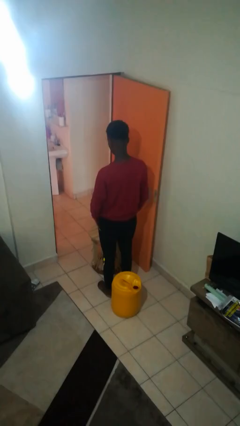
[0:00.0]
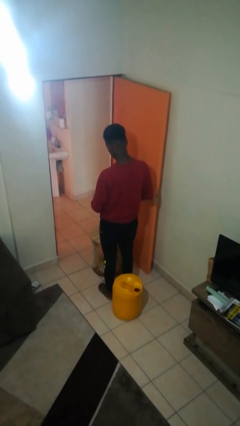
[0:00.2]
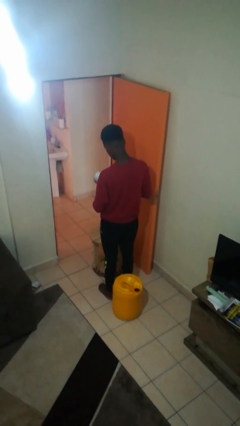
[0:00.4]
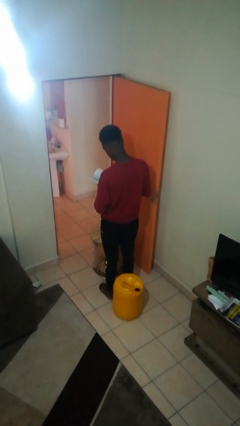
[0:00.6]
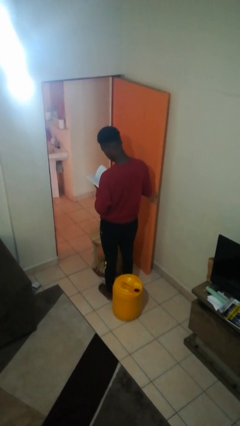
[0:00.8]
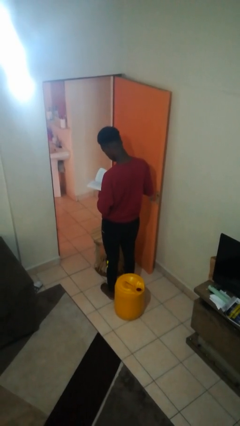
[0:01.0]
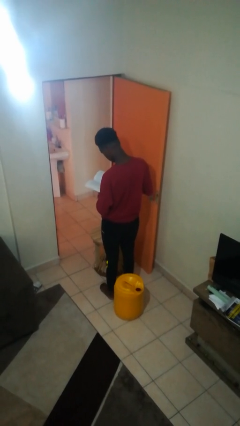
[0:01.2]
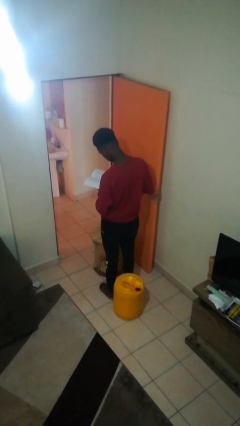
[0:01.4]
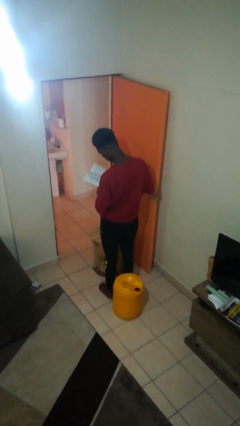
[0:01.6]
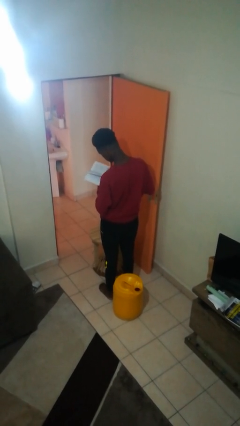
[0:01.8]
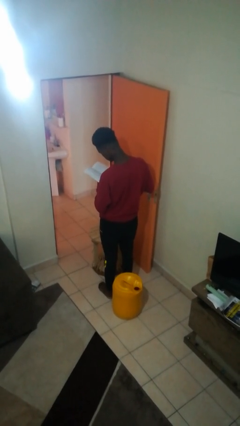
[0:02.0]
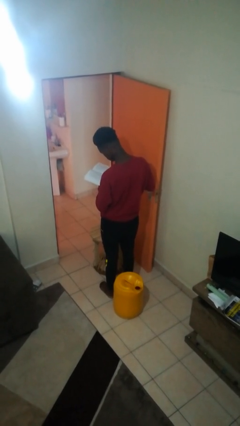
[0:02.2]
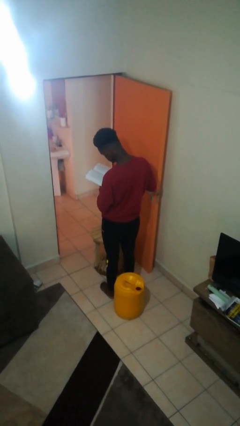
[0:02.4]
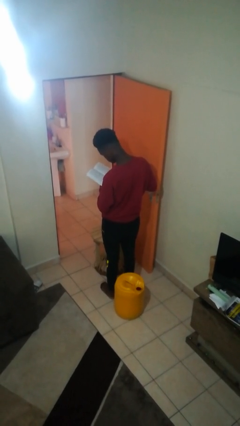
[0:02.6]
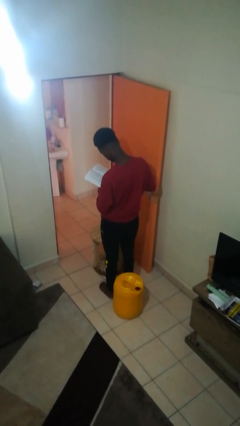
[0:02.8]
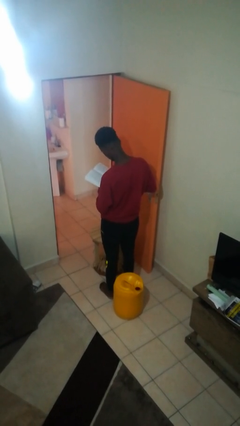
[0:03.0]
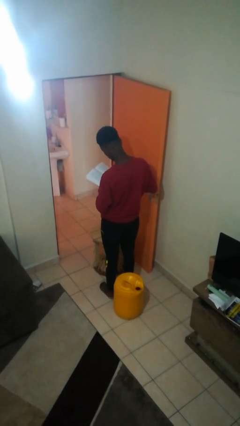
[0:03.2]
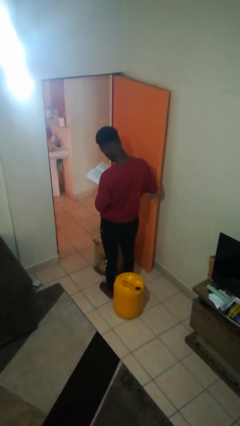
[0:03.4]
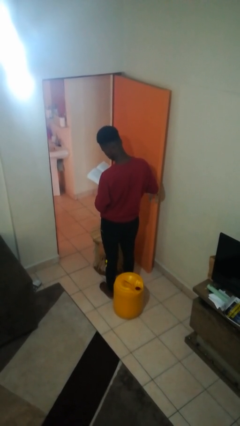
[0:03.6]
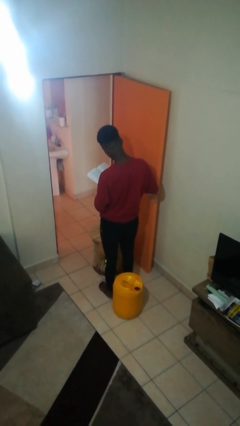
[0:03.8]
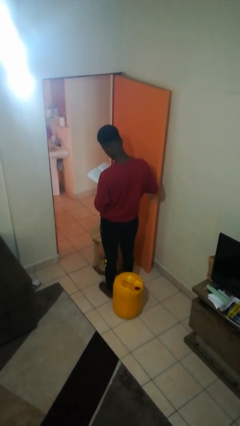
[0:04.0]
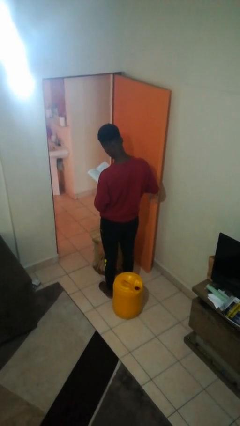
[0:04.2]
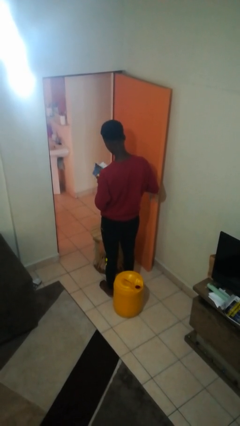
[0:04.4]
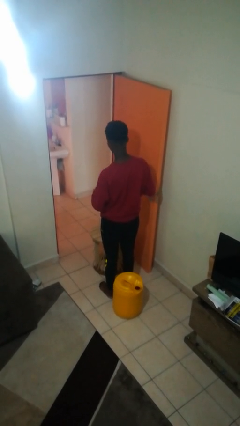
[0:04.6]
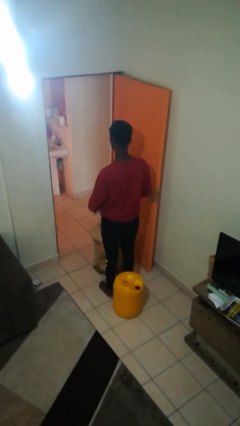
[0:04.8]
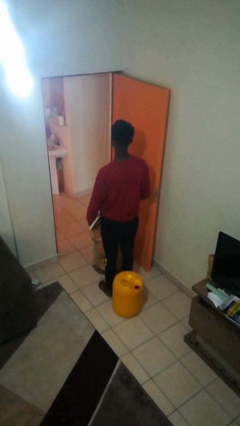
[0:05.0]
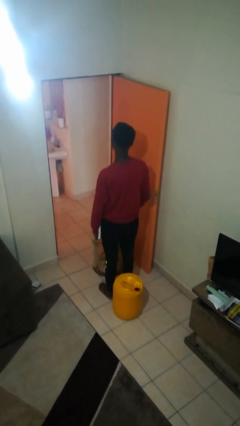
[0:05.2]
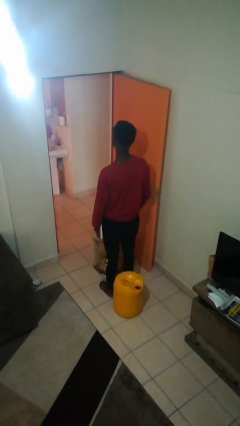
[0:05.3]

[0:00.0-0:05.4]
person reads book

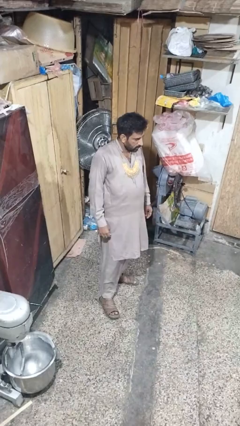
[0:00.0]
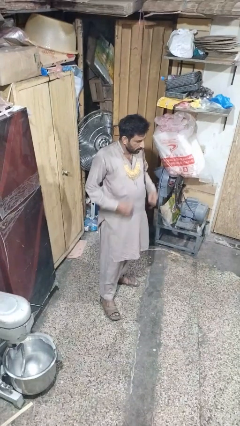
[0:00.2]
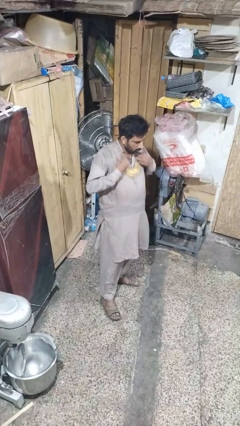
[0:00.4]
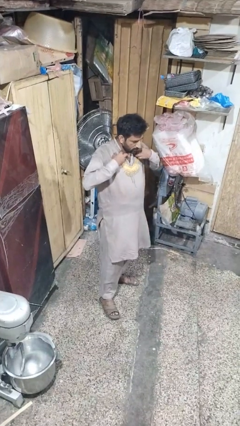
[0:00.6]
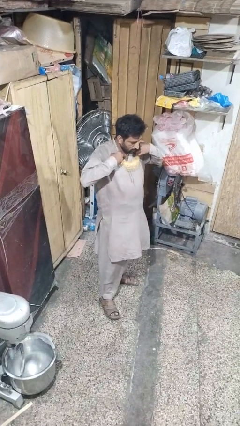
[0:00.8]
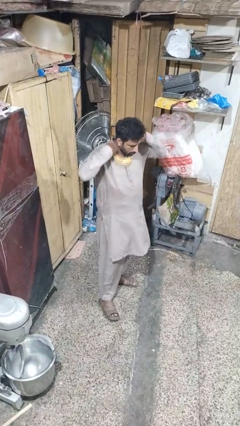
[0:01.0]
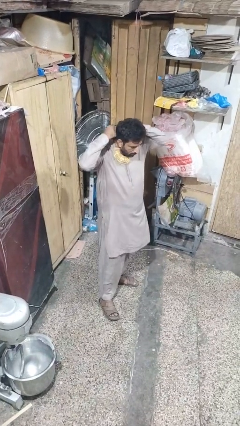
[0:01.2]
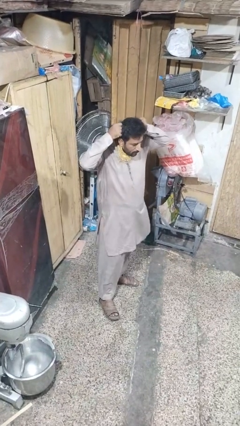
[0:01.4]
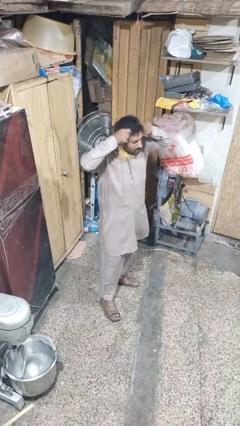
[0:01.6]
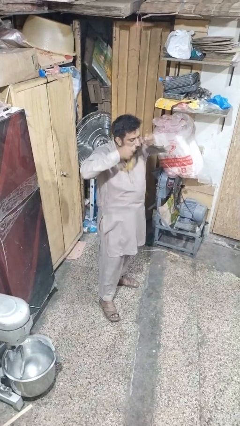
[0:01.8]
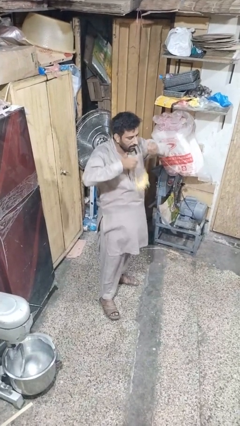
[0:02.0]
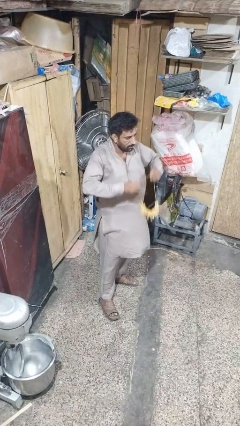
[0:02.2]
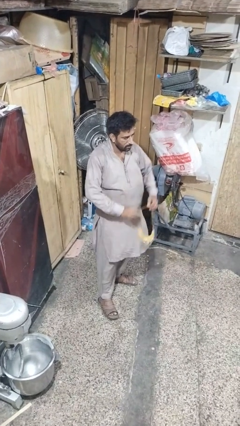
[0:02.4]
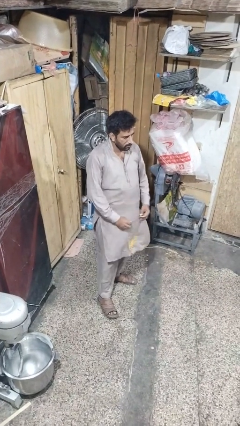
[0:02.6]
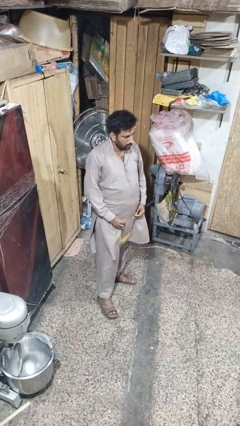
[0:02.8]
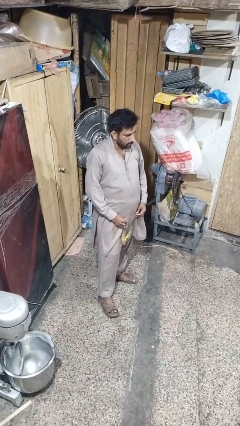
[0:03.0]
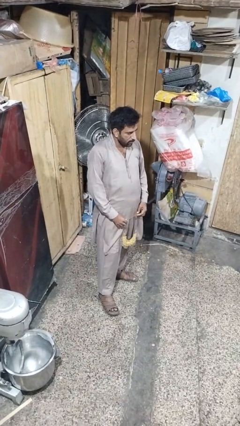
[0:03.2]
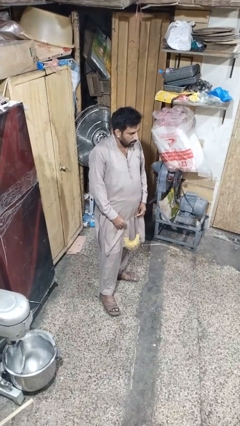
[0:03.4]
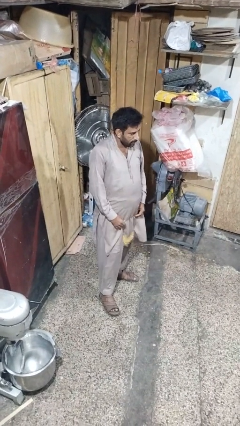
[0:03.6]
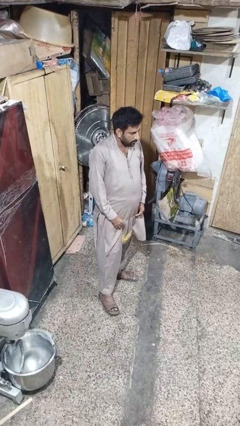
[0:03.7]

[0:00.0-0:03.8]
person takes off necklace

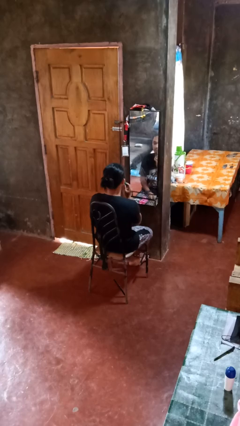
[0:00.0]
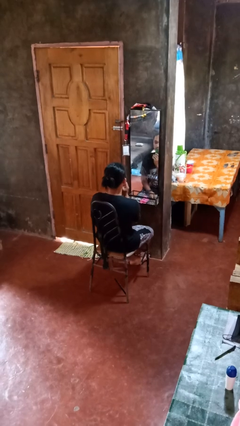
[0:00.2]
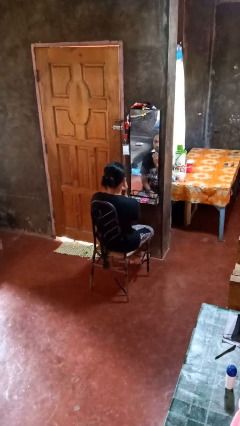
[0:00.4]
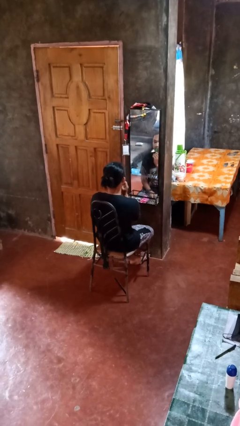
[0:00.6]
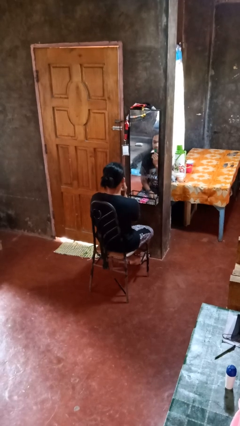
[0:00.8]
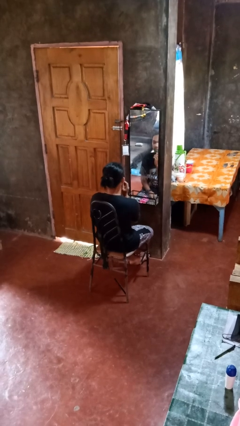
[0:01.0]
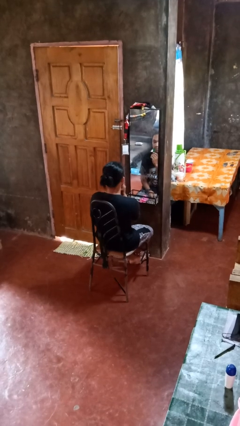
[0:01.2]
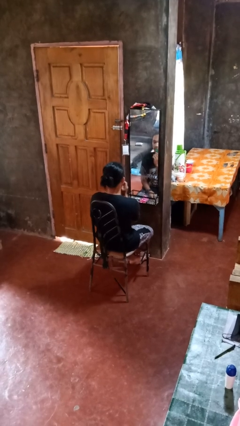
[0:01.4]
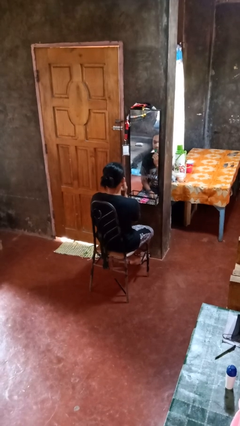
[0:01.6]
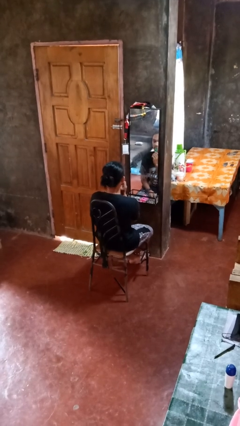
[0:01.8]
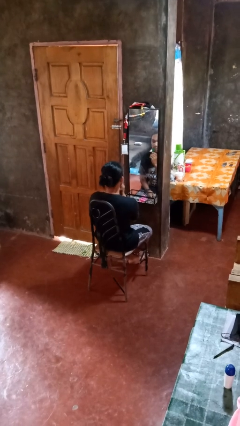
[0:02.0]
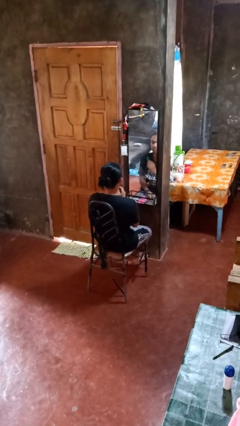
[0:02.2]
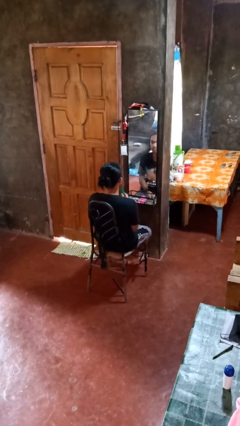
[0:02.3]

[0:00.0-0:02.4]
person applies lip makeup

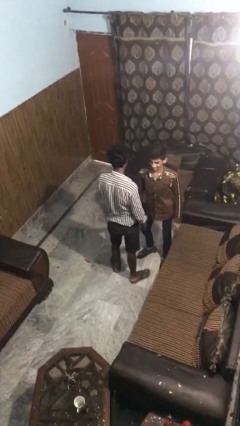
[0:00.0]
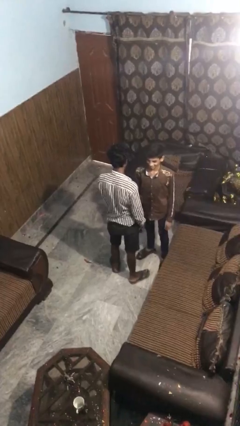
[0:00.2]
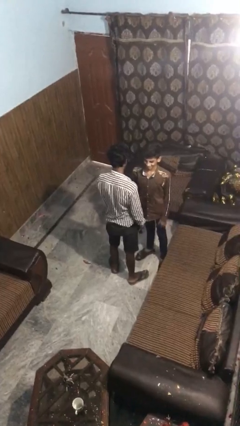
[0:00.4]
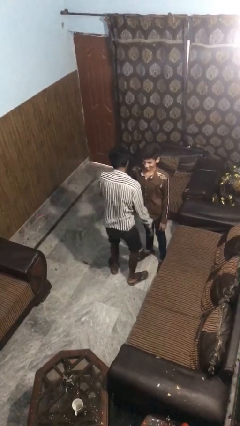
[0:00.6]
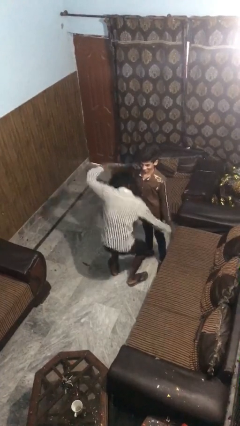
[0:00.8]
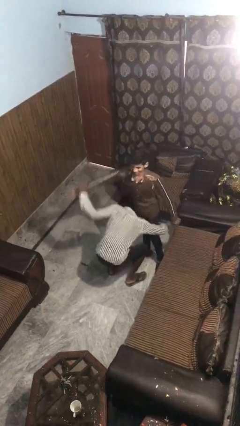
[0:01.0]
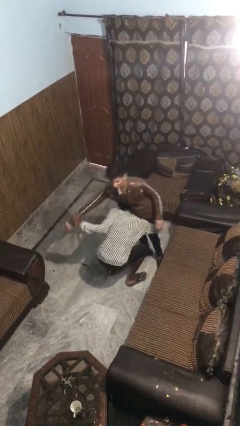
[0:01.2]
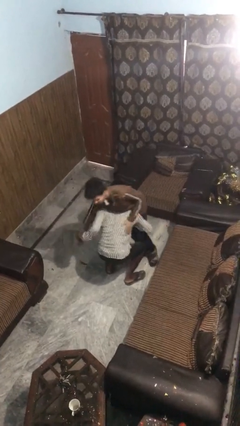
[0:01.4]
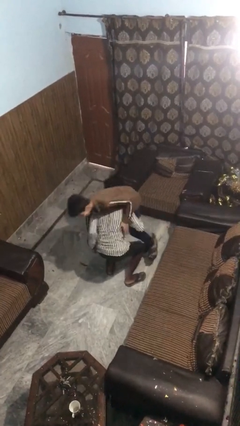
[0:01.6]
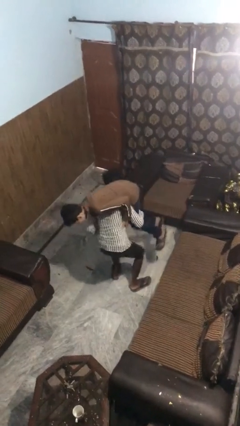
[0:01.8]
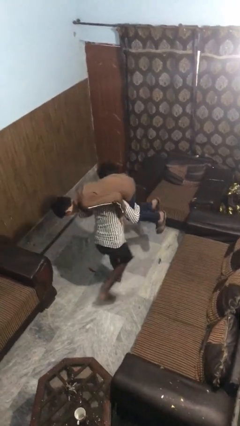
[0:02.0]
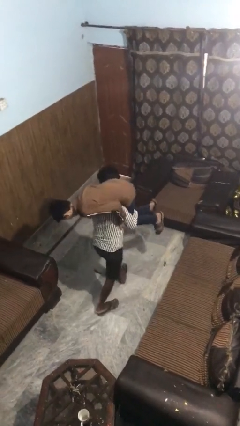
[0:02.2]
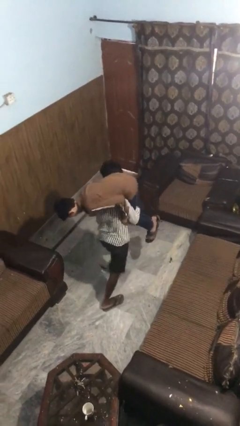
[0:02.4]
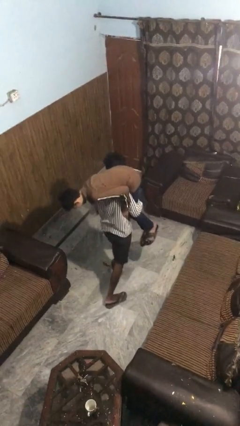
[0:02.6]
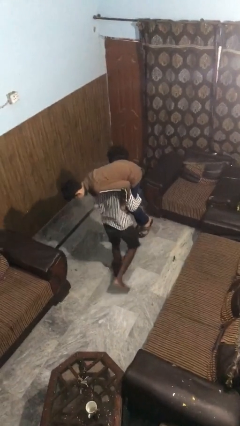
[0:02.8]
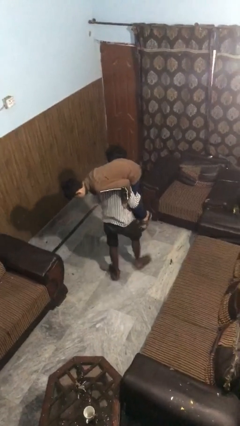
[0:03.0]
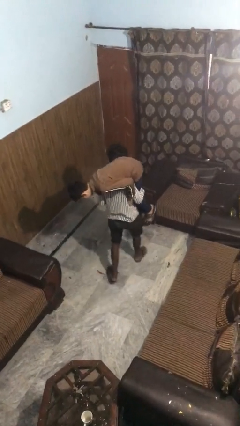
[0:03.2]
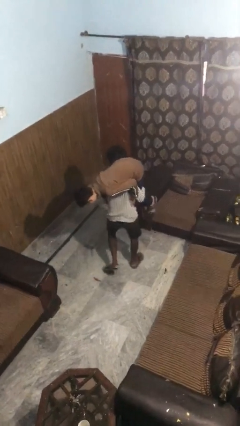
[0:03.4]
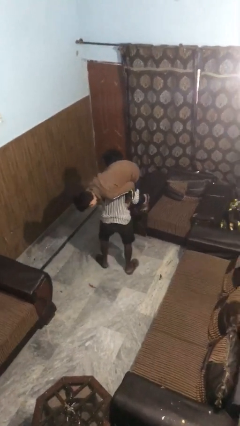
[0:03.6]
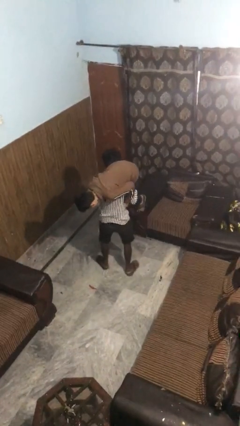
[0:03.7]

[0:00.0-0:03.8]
person carries person on shoulders

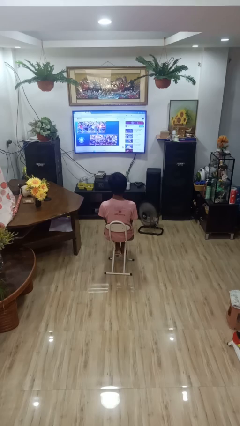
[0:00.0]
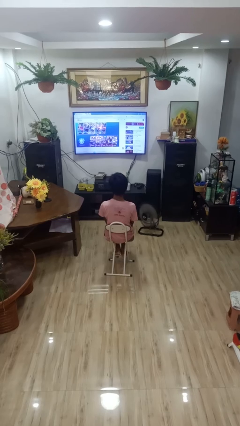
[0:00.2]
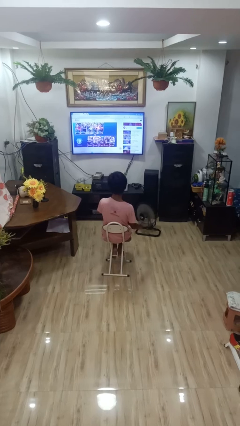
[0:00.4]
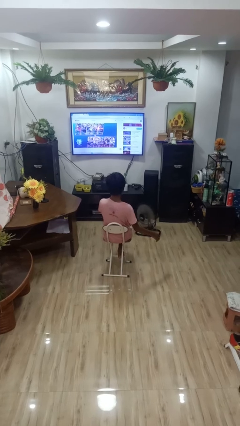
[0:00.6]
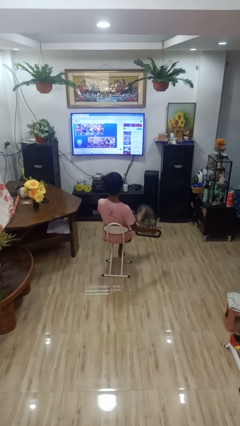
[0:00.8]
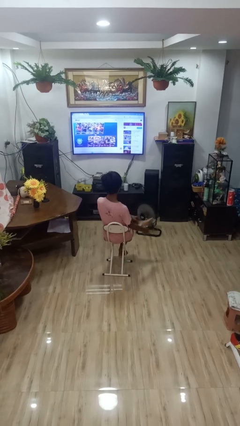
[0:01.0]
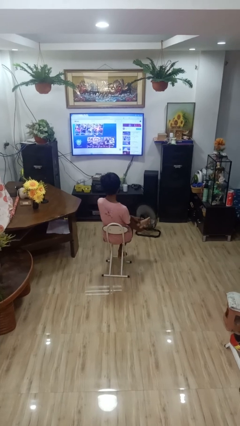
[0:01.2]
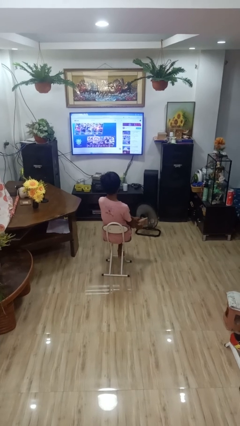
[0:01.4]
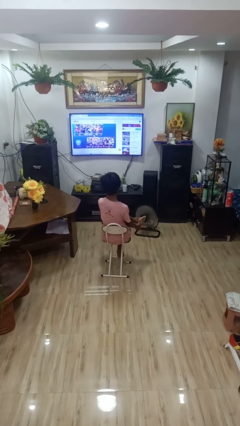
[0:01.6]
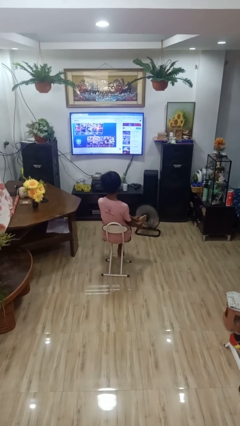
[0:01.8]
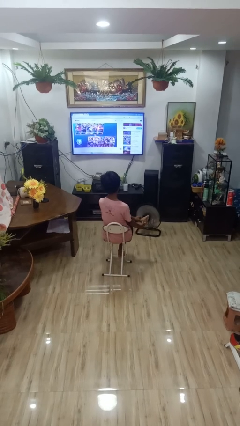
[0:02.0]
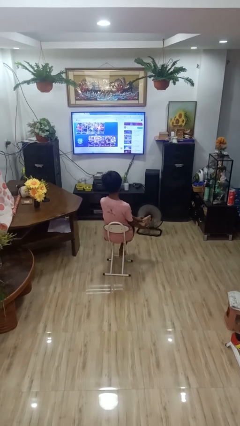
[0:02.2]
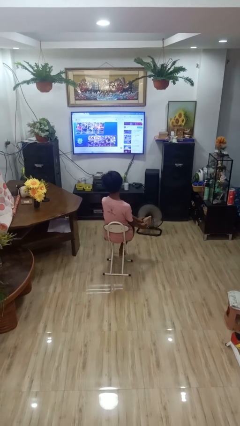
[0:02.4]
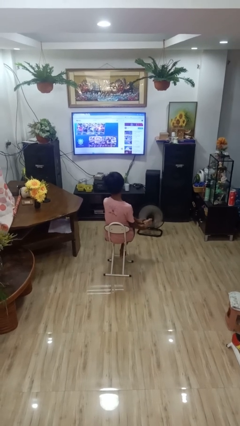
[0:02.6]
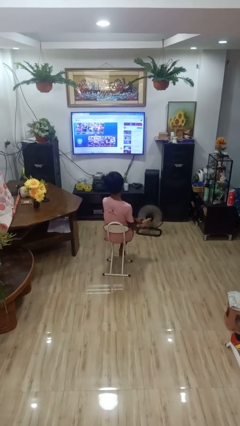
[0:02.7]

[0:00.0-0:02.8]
person rubs foot
